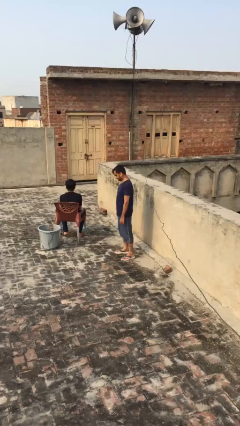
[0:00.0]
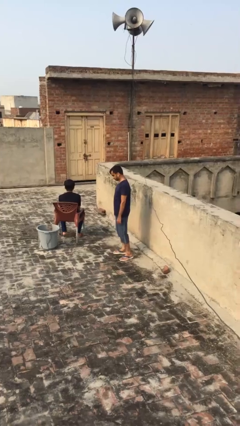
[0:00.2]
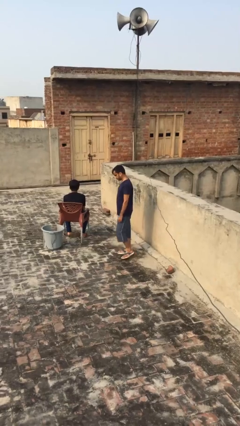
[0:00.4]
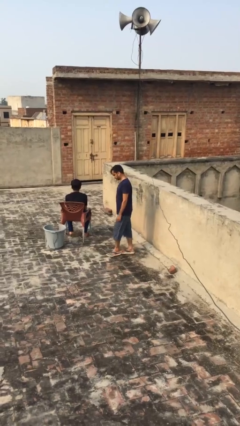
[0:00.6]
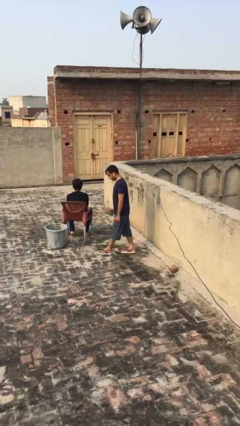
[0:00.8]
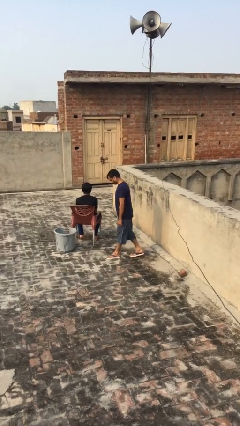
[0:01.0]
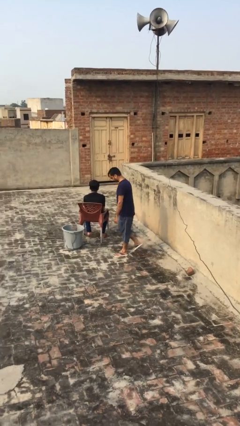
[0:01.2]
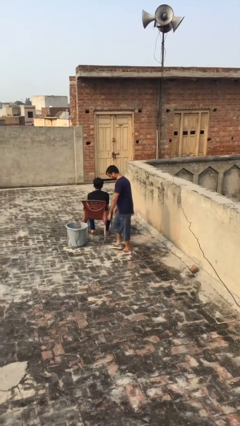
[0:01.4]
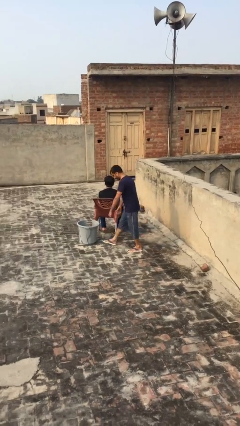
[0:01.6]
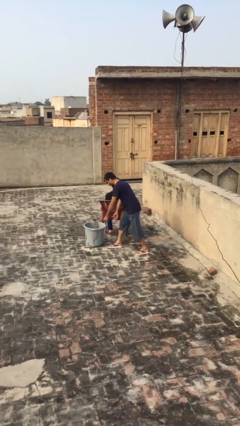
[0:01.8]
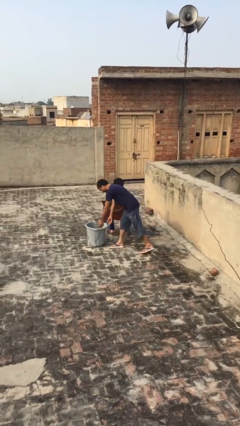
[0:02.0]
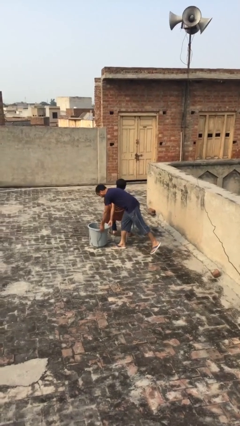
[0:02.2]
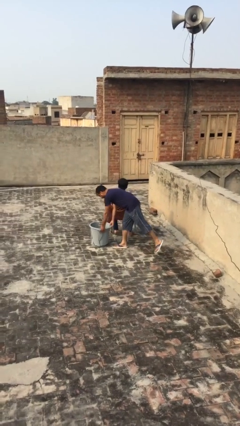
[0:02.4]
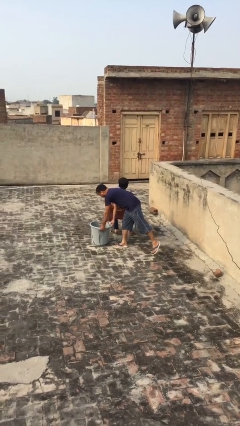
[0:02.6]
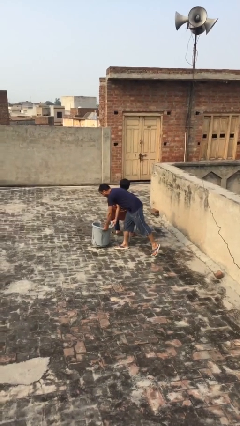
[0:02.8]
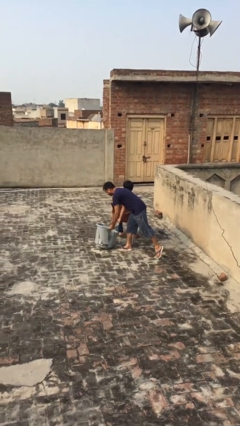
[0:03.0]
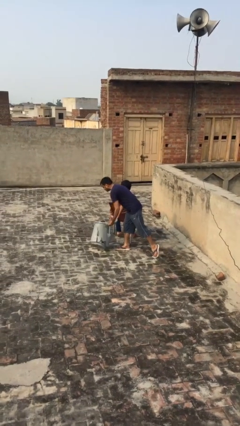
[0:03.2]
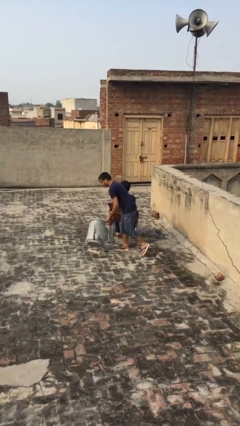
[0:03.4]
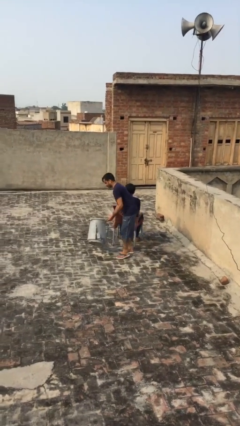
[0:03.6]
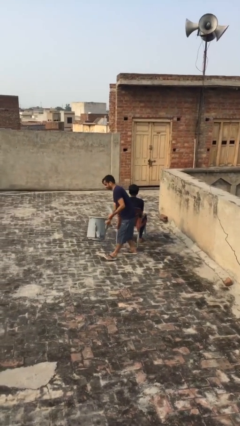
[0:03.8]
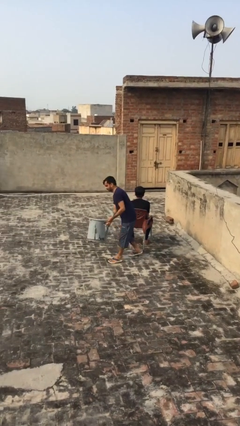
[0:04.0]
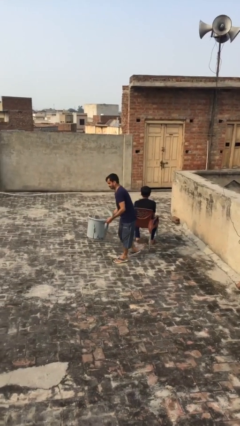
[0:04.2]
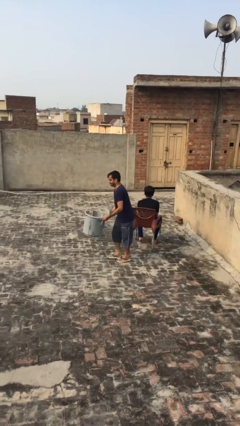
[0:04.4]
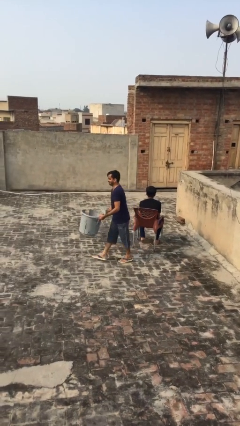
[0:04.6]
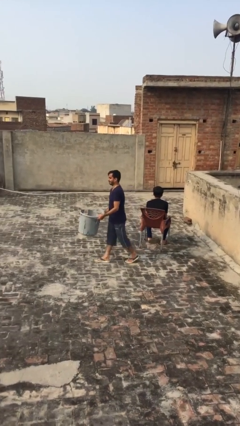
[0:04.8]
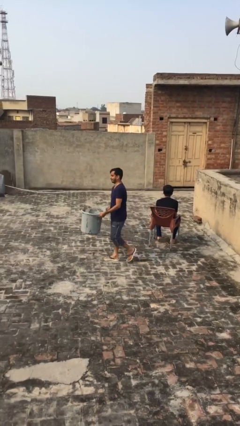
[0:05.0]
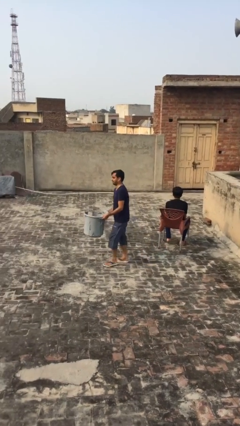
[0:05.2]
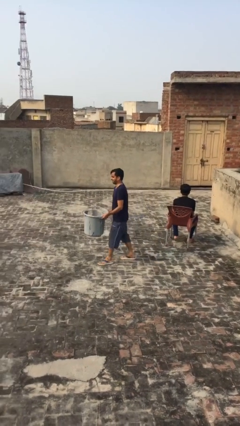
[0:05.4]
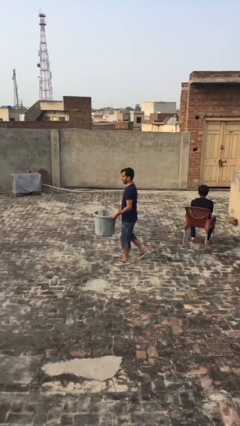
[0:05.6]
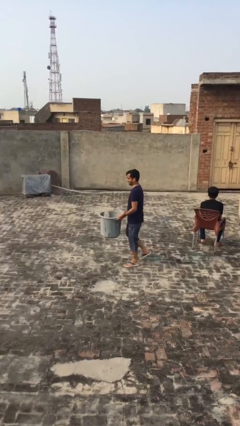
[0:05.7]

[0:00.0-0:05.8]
person steals object from person

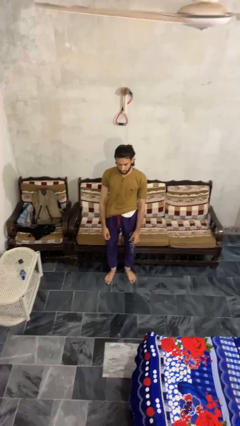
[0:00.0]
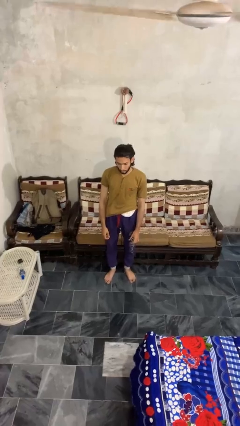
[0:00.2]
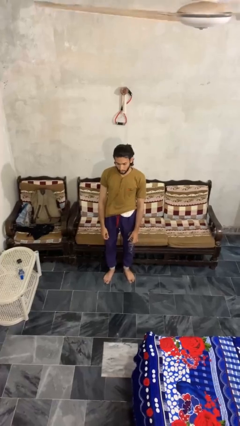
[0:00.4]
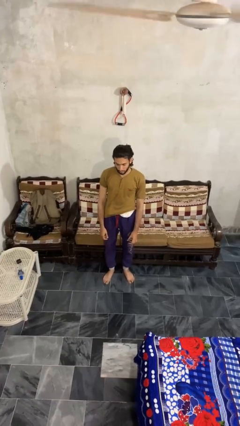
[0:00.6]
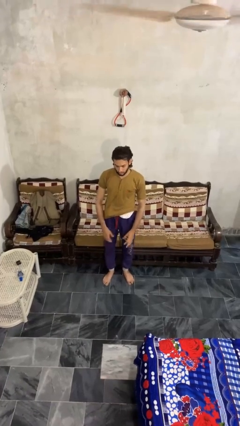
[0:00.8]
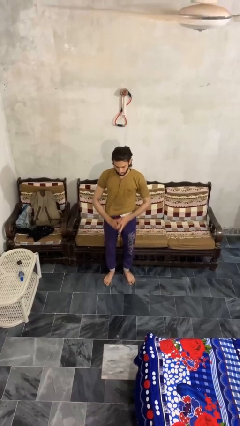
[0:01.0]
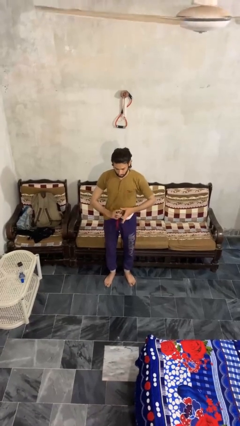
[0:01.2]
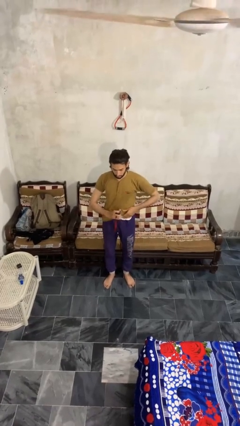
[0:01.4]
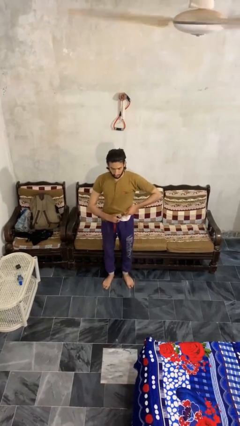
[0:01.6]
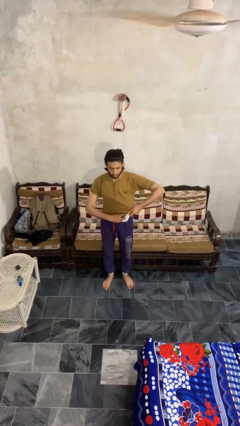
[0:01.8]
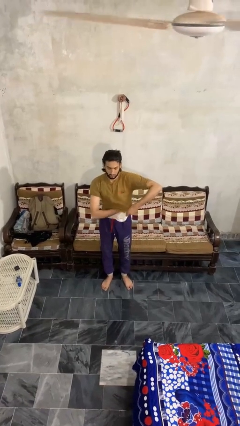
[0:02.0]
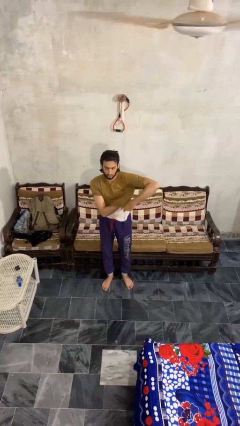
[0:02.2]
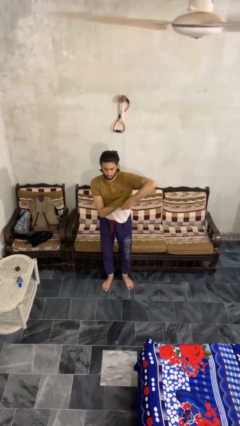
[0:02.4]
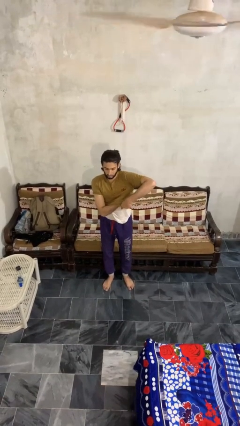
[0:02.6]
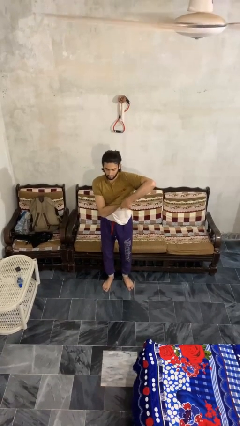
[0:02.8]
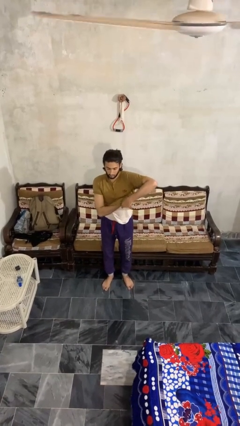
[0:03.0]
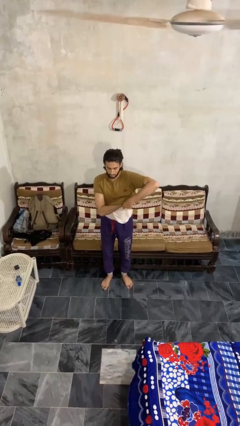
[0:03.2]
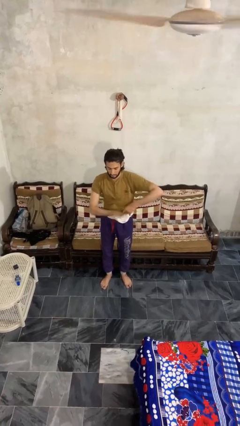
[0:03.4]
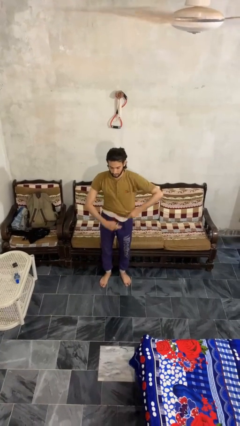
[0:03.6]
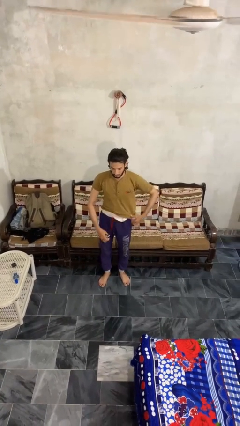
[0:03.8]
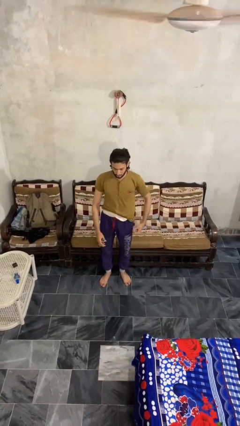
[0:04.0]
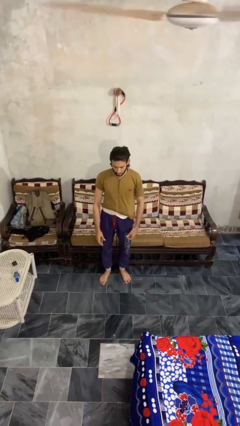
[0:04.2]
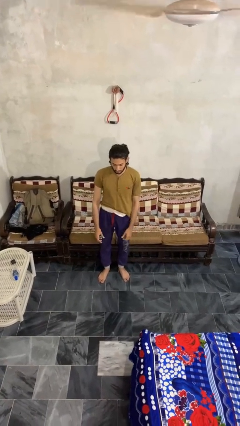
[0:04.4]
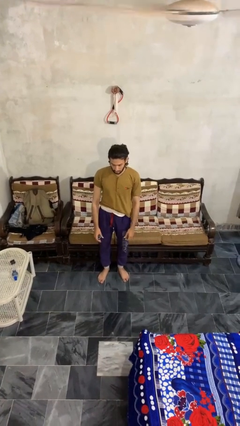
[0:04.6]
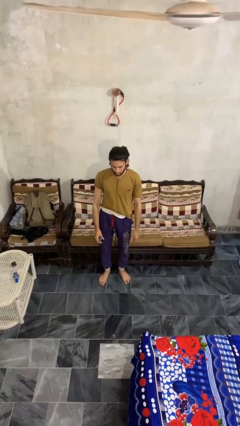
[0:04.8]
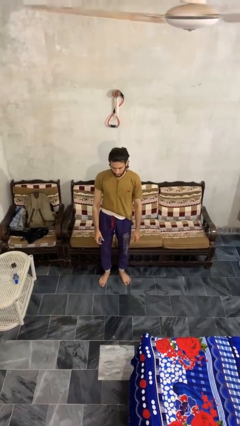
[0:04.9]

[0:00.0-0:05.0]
person applies deodorant

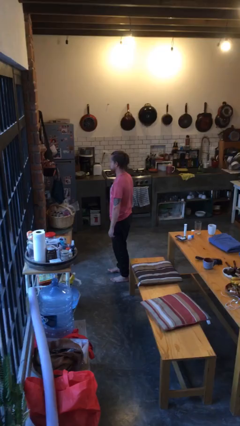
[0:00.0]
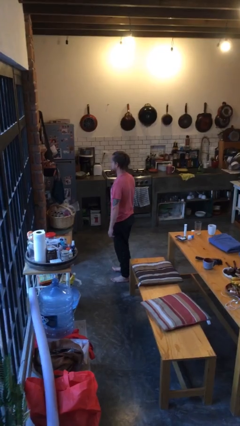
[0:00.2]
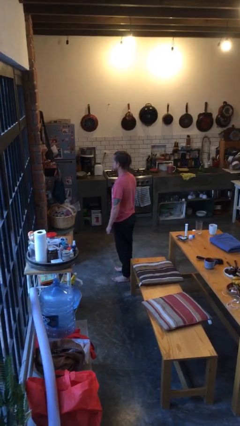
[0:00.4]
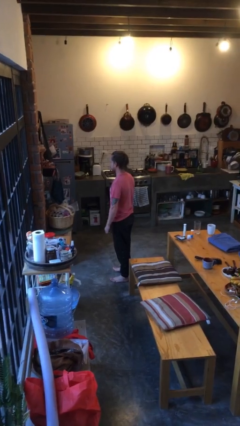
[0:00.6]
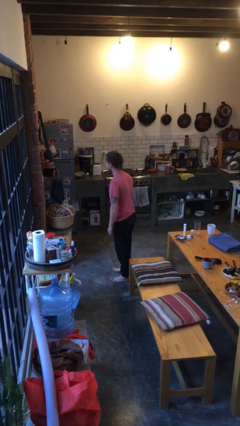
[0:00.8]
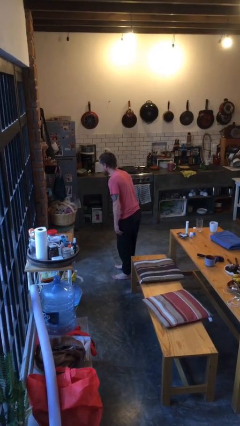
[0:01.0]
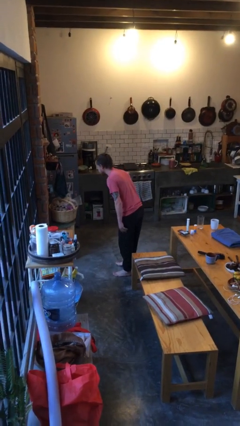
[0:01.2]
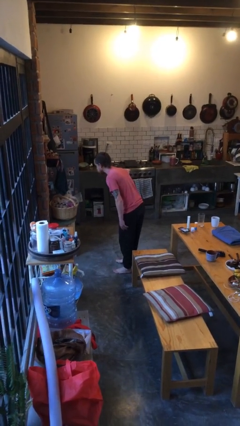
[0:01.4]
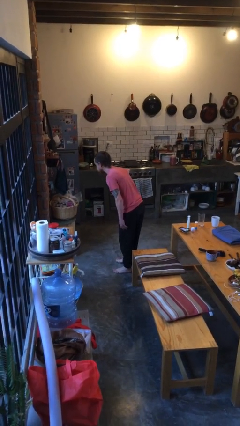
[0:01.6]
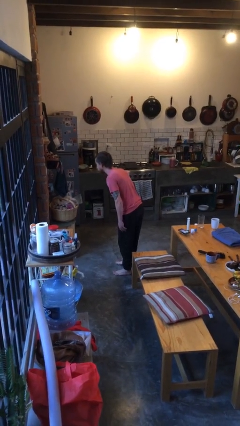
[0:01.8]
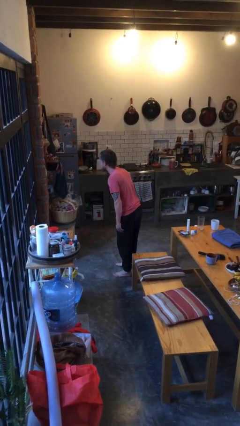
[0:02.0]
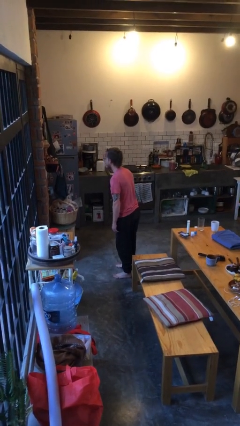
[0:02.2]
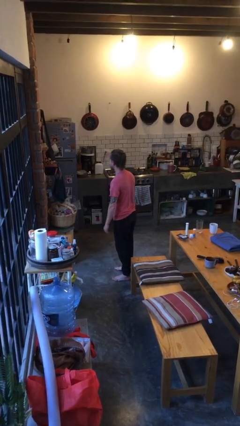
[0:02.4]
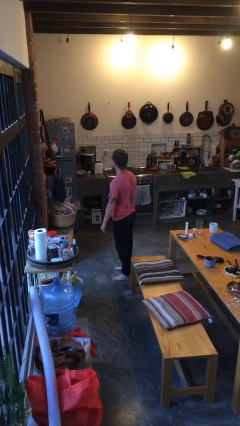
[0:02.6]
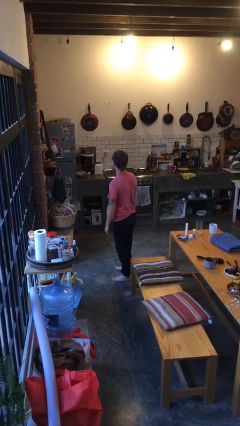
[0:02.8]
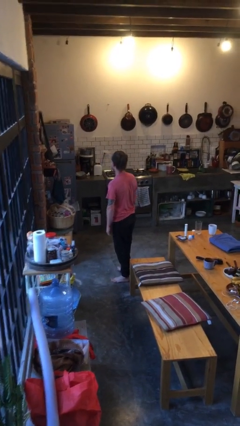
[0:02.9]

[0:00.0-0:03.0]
person bows

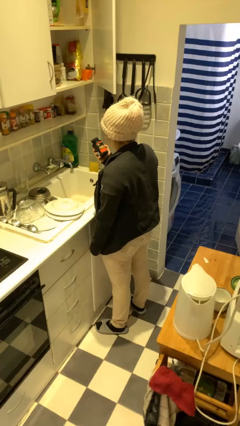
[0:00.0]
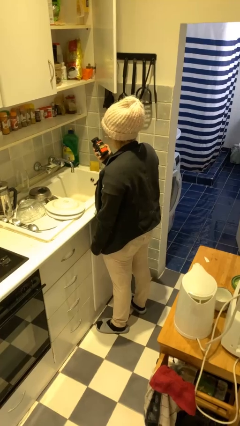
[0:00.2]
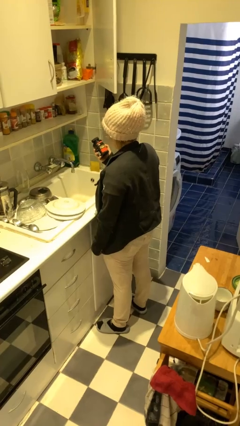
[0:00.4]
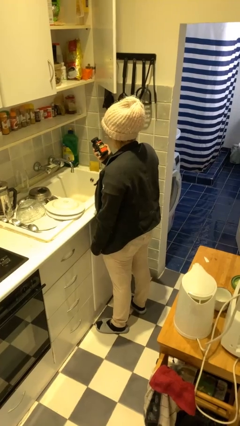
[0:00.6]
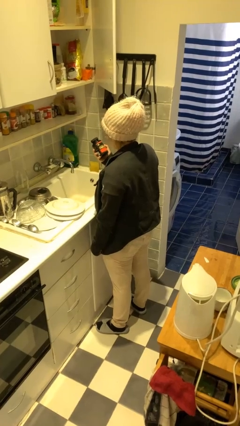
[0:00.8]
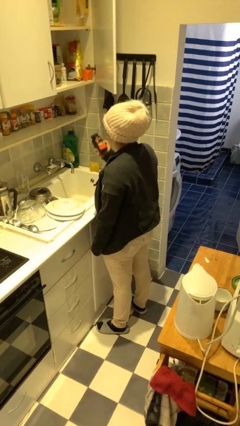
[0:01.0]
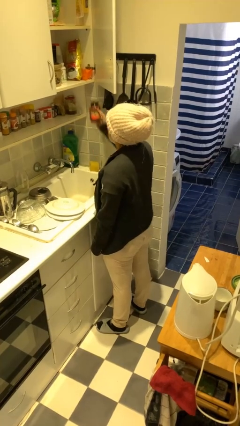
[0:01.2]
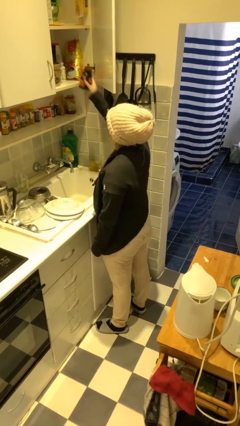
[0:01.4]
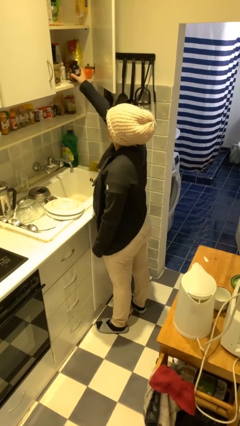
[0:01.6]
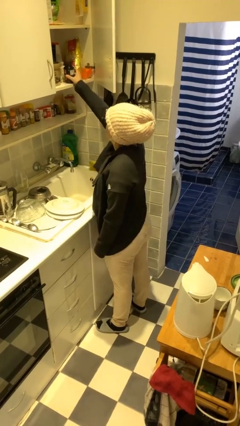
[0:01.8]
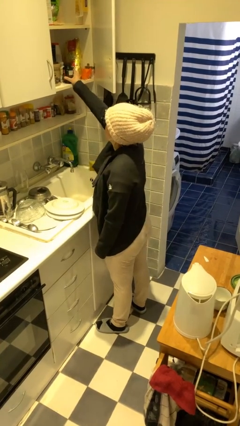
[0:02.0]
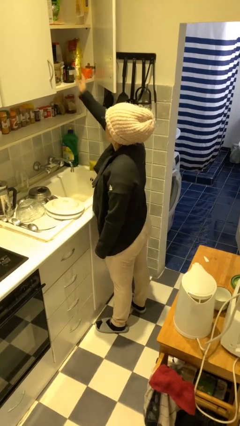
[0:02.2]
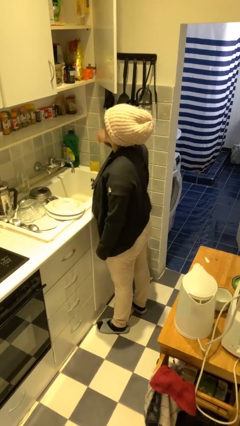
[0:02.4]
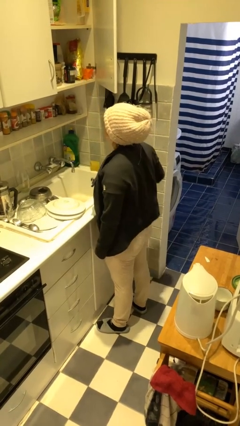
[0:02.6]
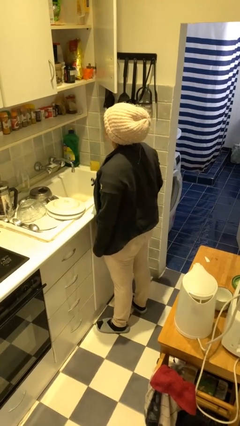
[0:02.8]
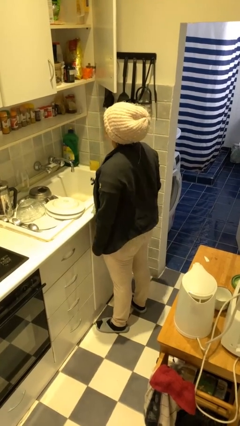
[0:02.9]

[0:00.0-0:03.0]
person puts down object into cabinet

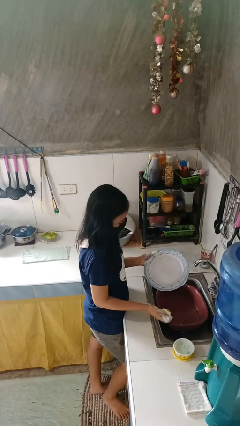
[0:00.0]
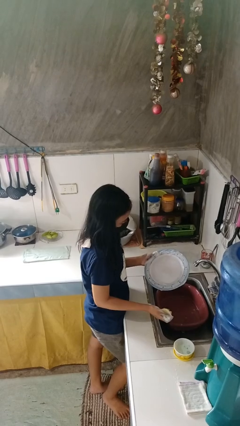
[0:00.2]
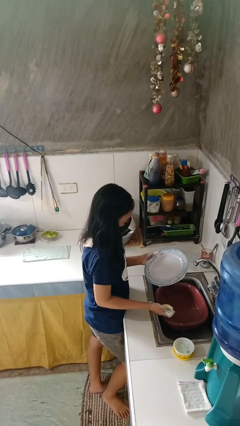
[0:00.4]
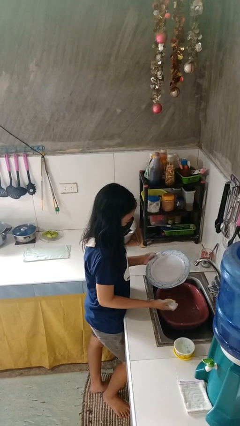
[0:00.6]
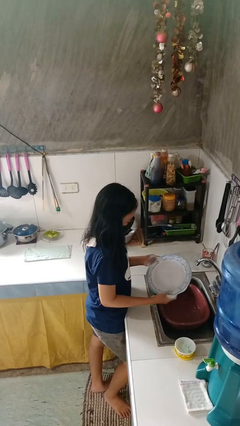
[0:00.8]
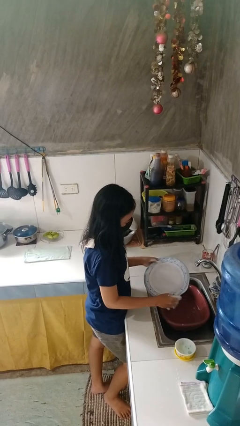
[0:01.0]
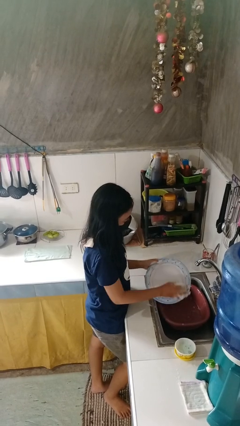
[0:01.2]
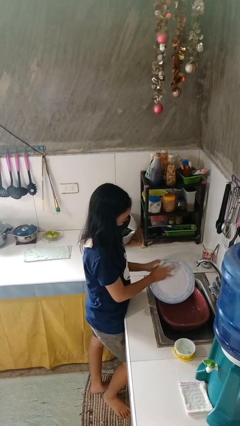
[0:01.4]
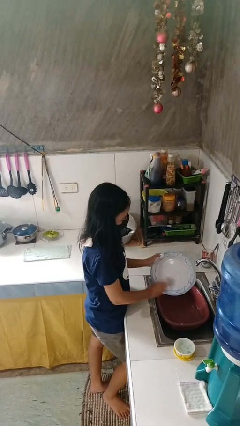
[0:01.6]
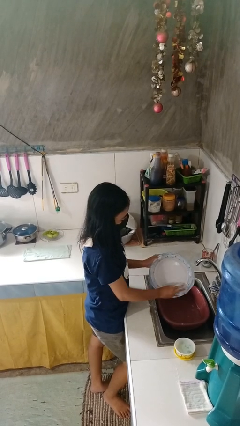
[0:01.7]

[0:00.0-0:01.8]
person washes dish
